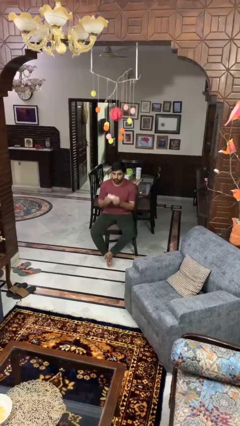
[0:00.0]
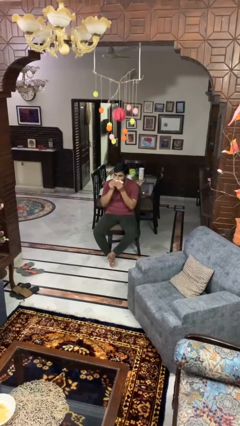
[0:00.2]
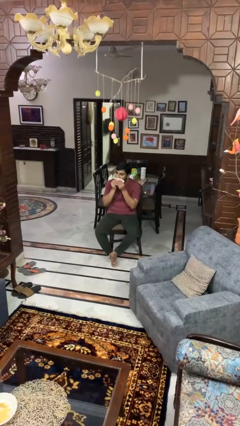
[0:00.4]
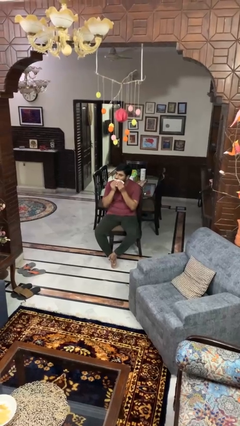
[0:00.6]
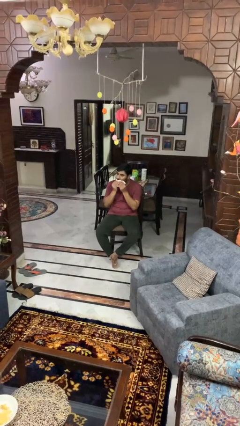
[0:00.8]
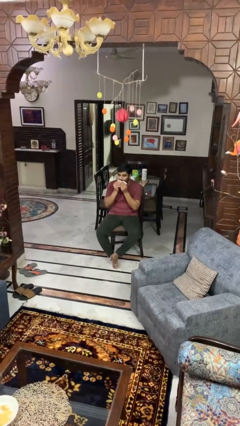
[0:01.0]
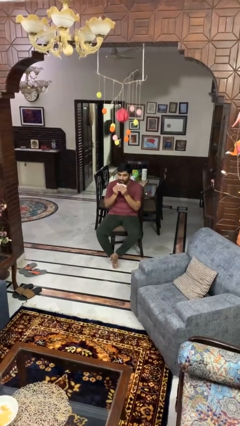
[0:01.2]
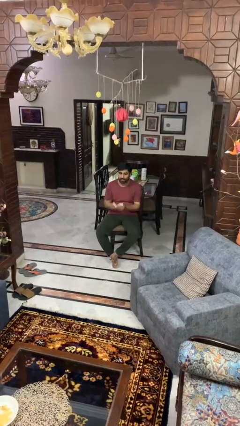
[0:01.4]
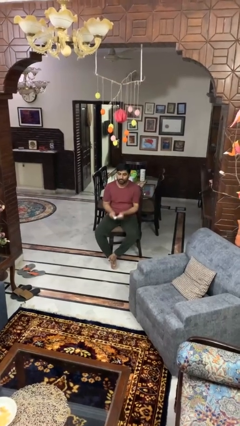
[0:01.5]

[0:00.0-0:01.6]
person wipes mouth with napkin

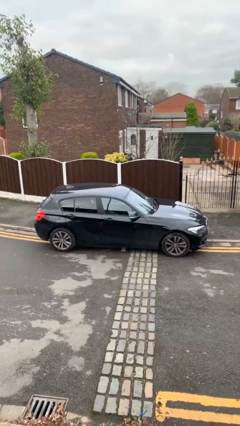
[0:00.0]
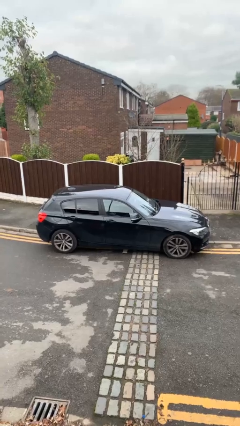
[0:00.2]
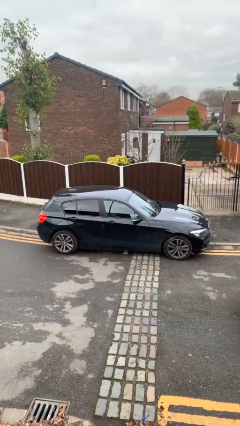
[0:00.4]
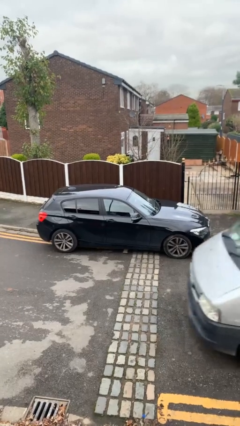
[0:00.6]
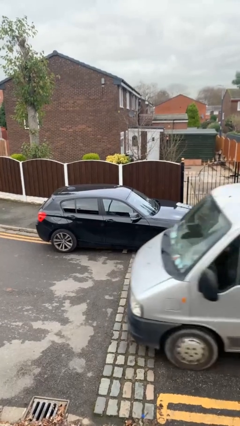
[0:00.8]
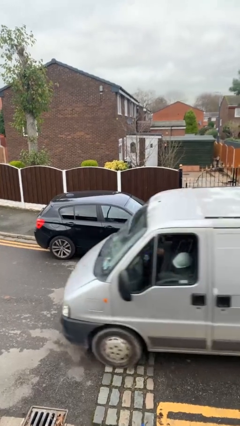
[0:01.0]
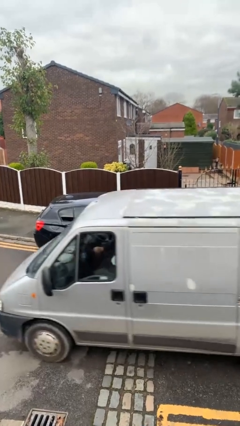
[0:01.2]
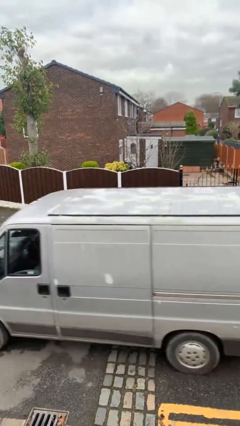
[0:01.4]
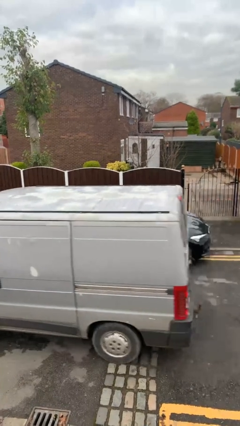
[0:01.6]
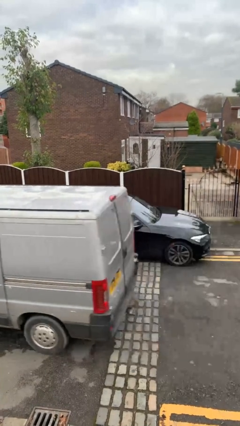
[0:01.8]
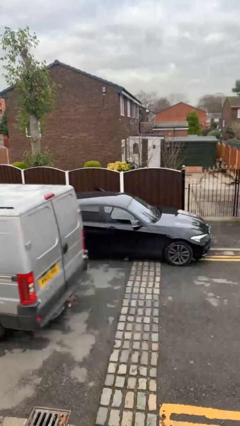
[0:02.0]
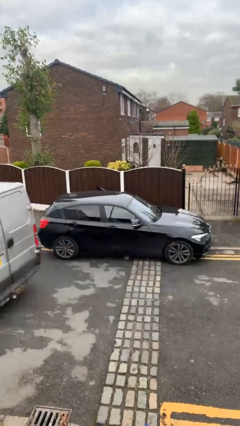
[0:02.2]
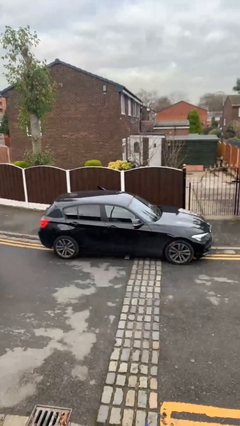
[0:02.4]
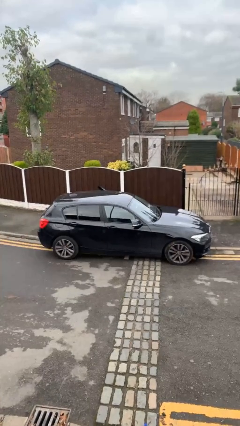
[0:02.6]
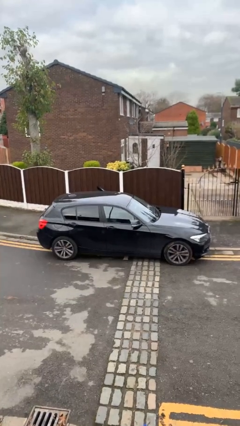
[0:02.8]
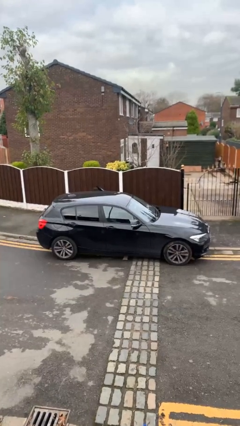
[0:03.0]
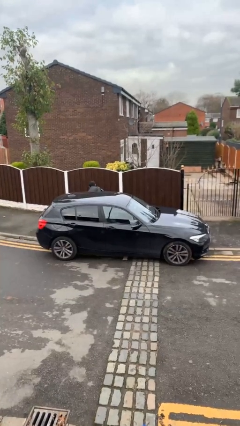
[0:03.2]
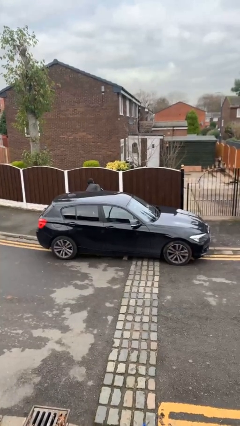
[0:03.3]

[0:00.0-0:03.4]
car drops off person

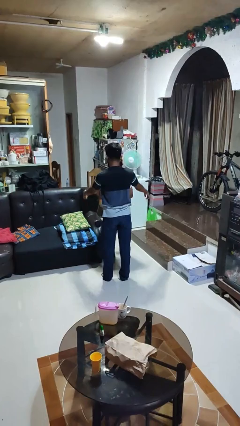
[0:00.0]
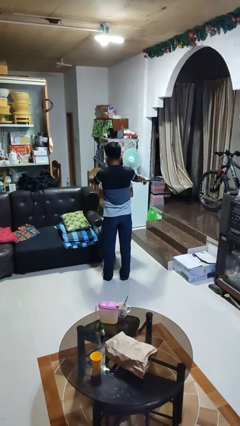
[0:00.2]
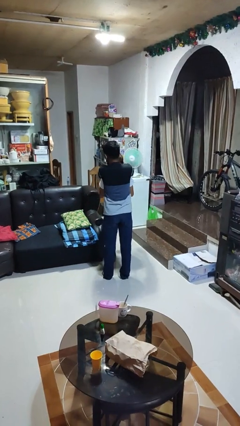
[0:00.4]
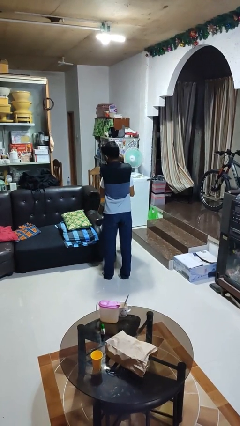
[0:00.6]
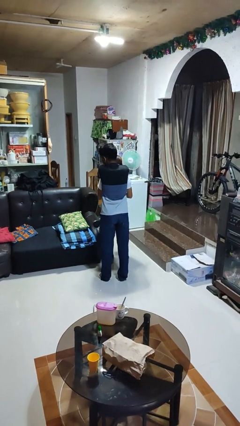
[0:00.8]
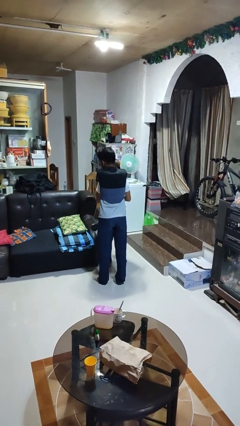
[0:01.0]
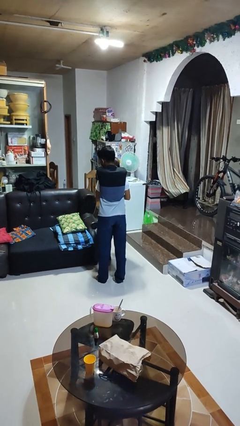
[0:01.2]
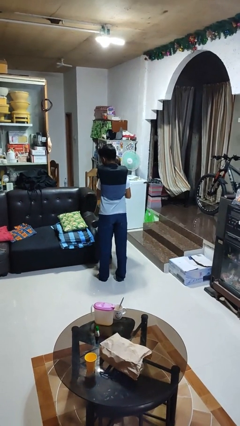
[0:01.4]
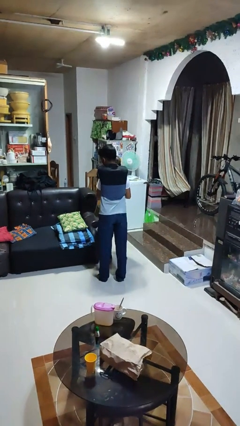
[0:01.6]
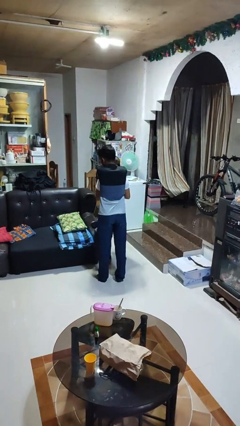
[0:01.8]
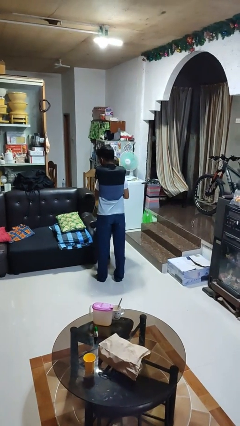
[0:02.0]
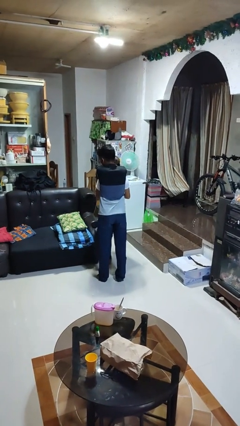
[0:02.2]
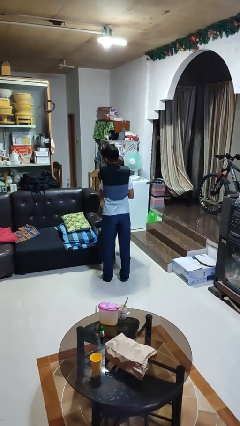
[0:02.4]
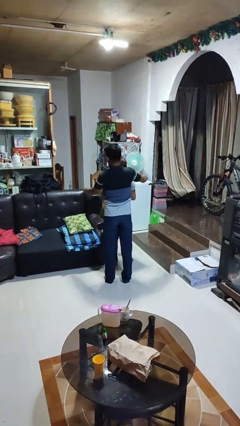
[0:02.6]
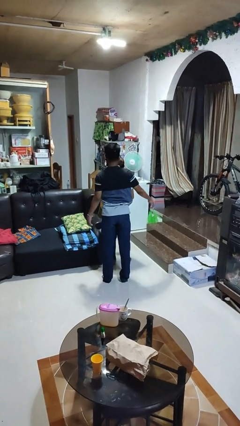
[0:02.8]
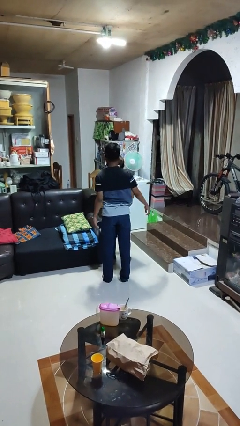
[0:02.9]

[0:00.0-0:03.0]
person hugs person from behind

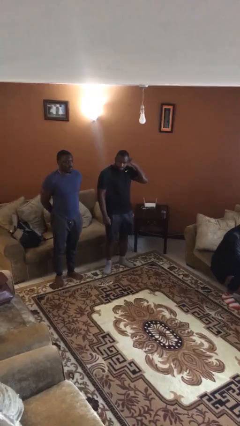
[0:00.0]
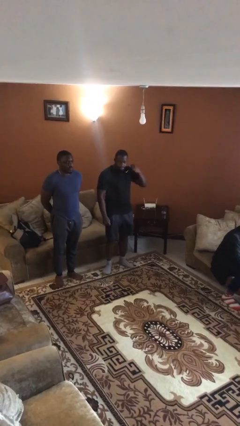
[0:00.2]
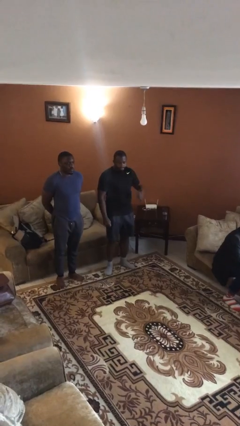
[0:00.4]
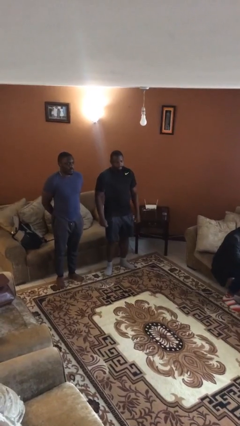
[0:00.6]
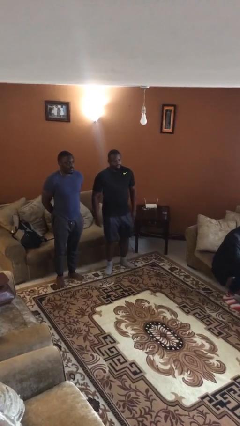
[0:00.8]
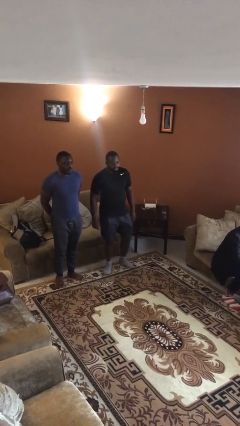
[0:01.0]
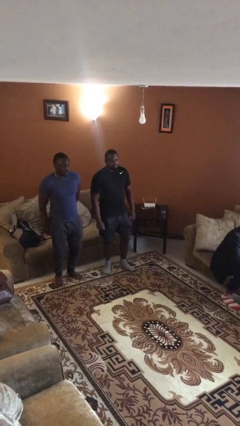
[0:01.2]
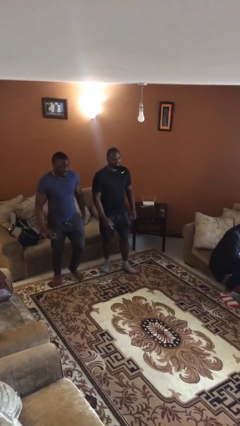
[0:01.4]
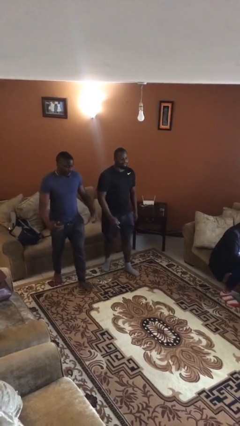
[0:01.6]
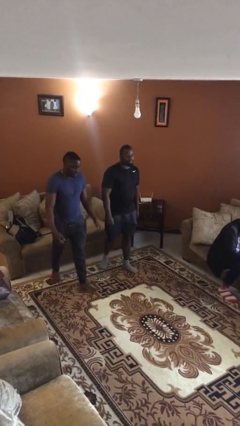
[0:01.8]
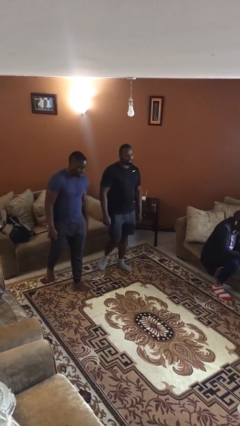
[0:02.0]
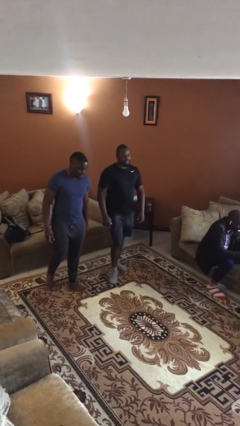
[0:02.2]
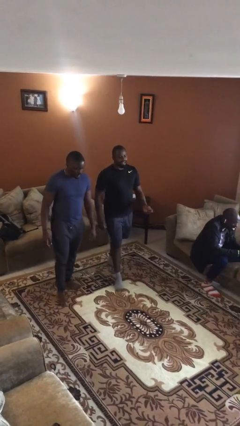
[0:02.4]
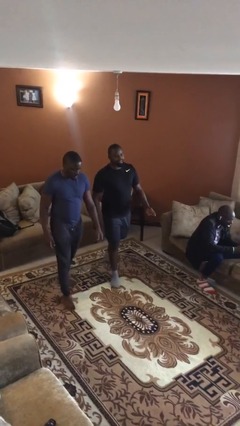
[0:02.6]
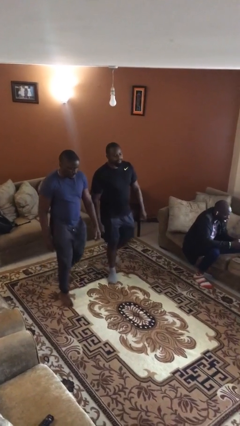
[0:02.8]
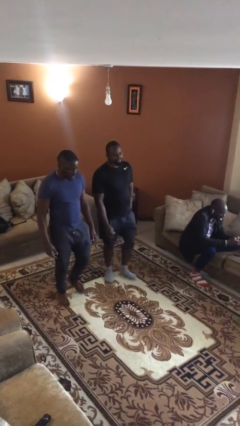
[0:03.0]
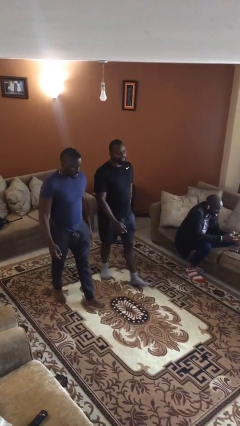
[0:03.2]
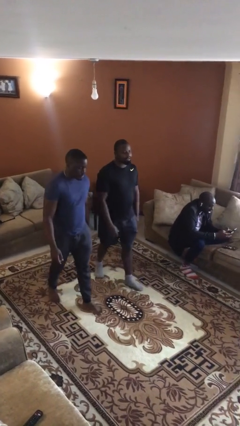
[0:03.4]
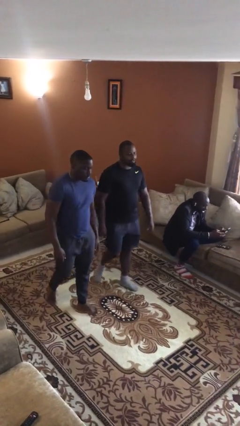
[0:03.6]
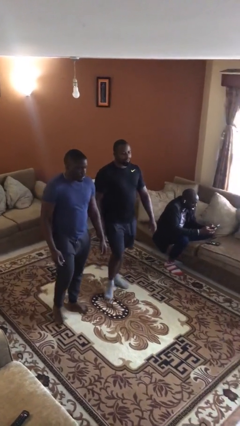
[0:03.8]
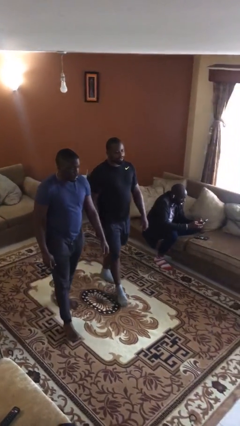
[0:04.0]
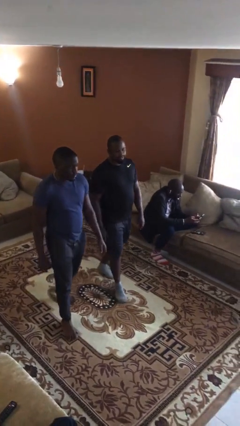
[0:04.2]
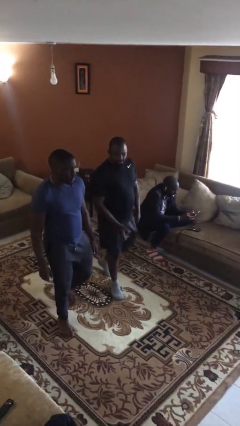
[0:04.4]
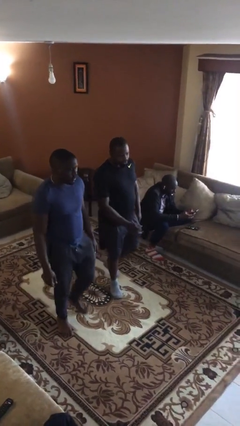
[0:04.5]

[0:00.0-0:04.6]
person talks to person

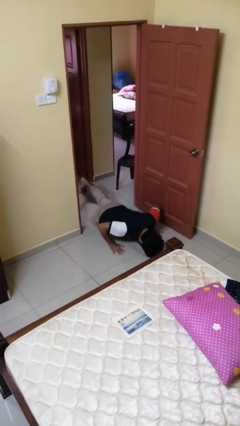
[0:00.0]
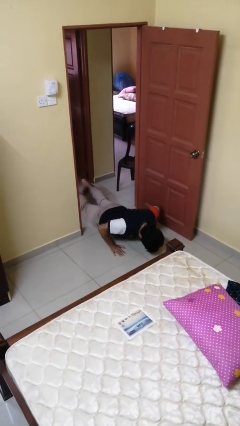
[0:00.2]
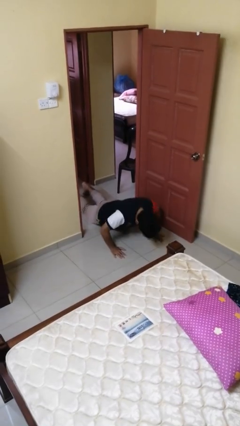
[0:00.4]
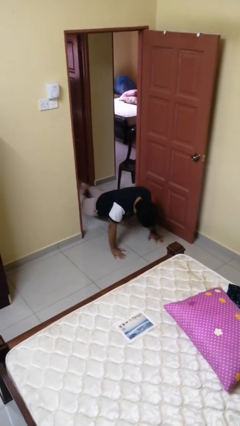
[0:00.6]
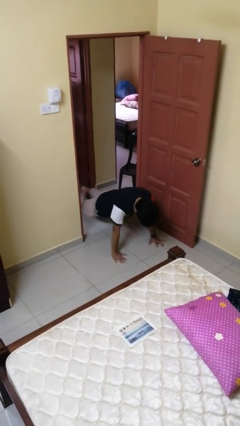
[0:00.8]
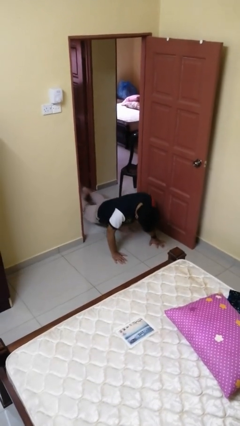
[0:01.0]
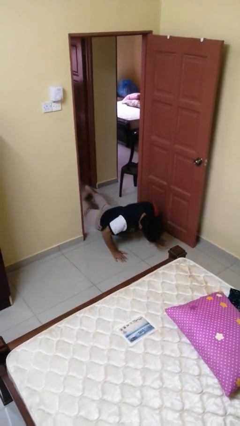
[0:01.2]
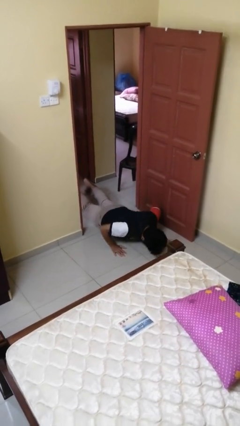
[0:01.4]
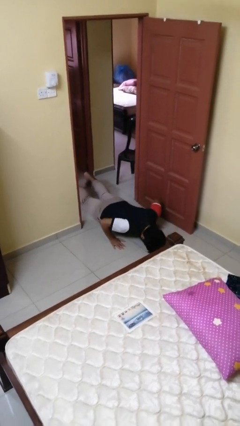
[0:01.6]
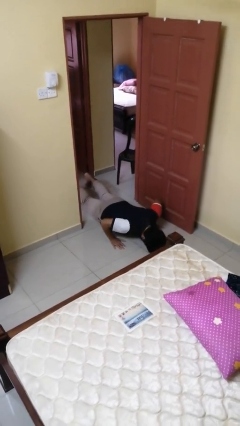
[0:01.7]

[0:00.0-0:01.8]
person exercises with pushup

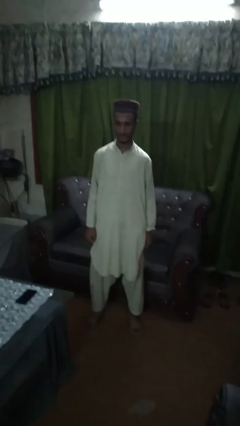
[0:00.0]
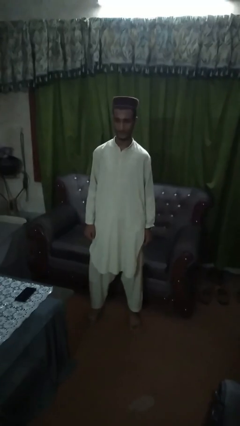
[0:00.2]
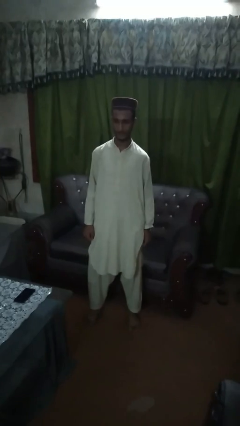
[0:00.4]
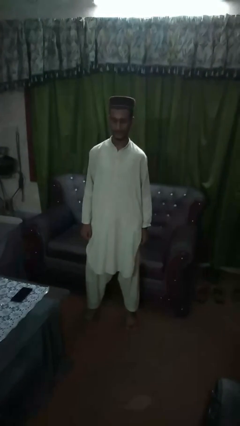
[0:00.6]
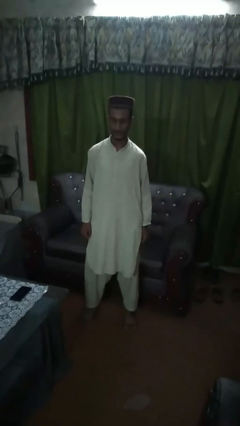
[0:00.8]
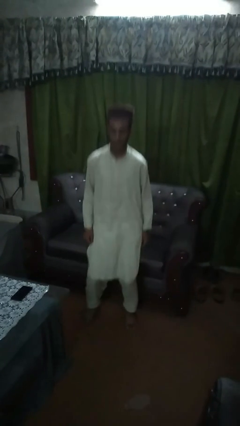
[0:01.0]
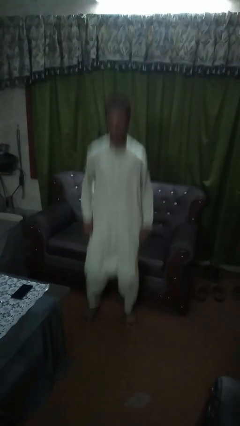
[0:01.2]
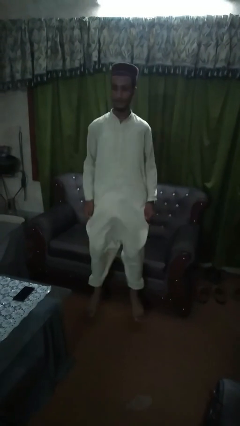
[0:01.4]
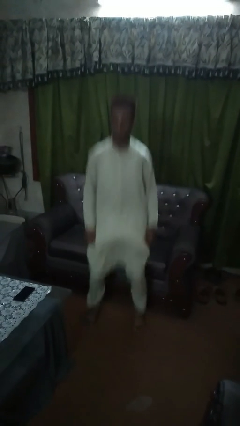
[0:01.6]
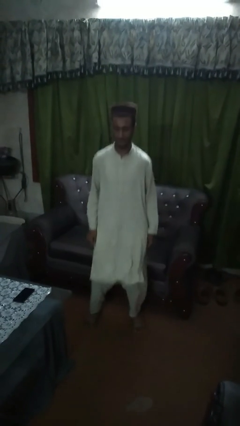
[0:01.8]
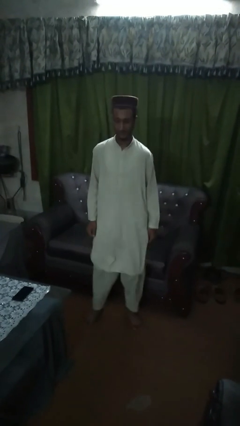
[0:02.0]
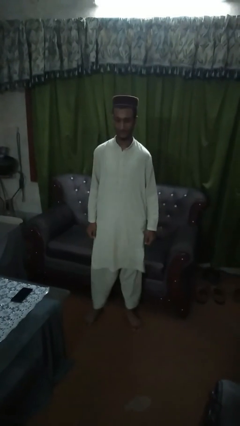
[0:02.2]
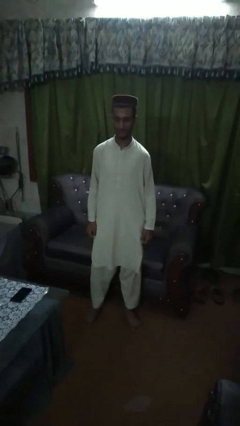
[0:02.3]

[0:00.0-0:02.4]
person jumps

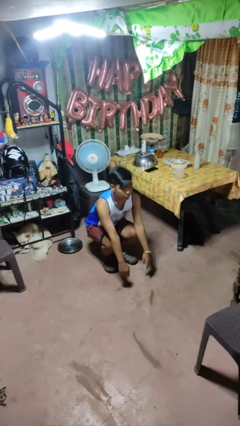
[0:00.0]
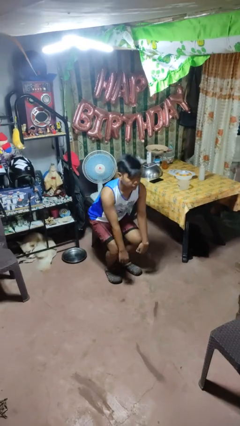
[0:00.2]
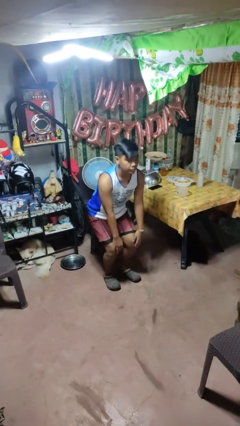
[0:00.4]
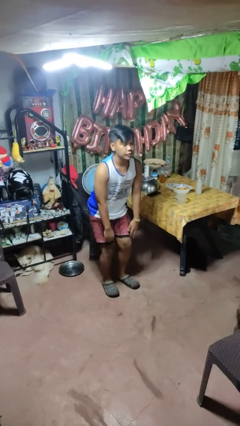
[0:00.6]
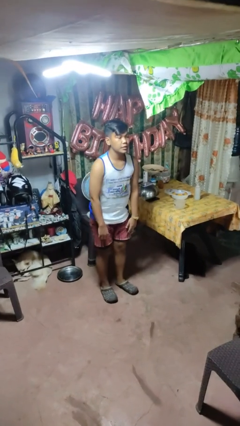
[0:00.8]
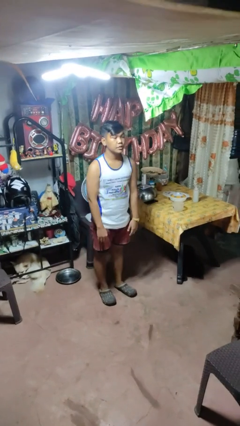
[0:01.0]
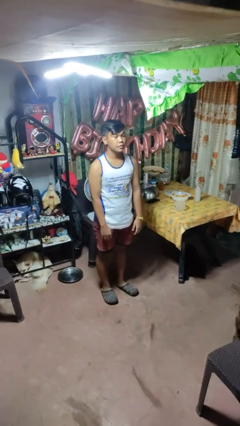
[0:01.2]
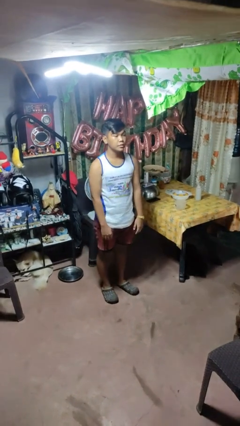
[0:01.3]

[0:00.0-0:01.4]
person stands up
